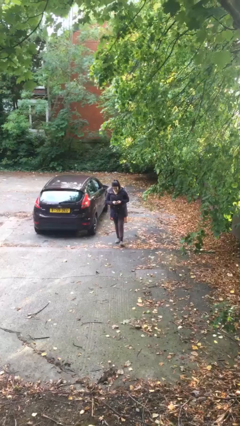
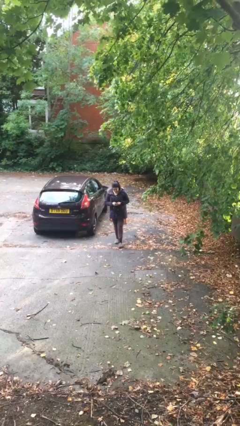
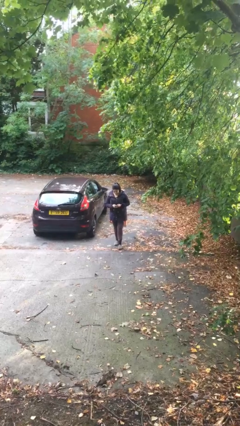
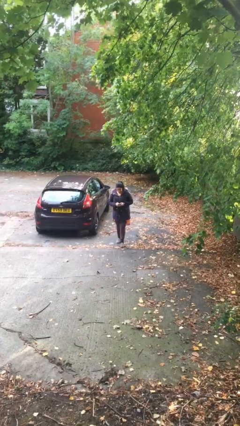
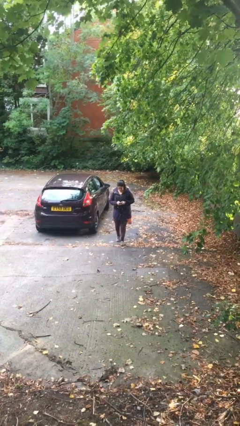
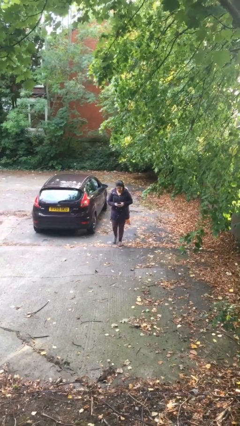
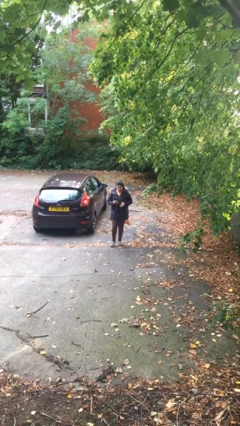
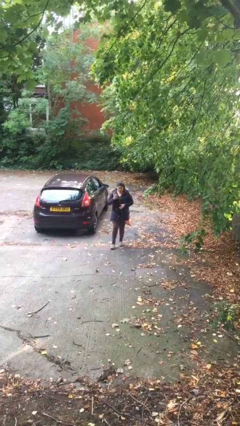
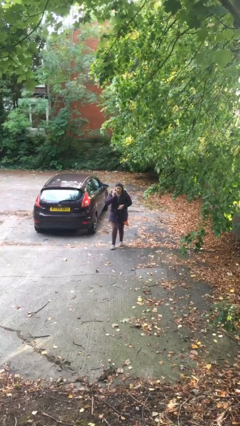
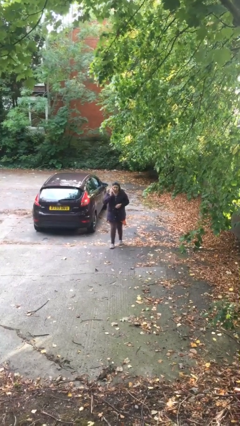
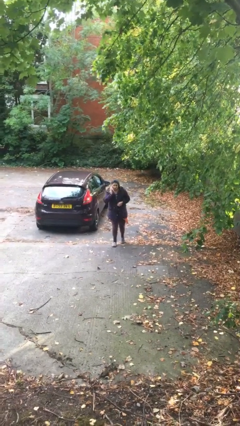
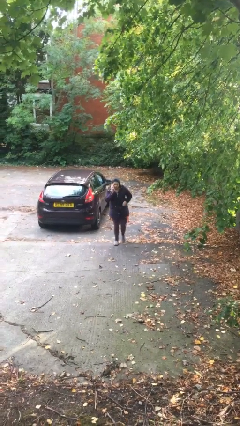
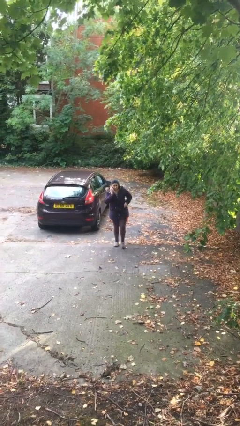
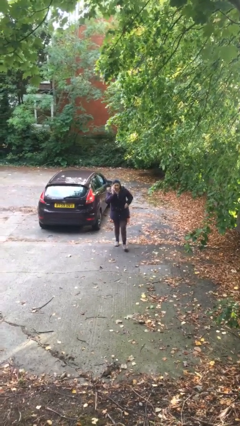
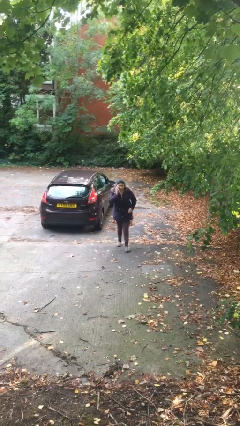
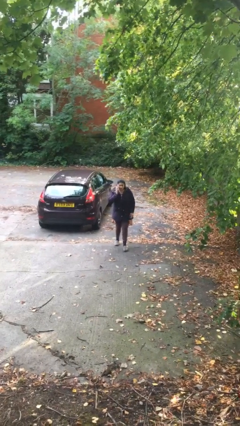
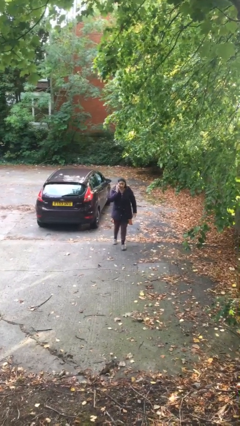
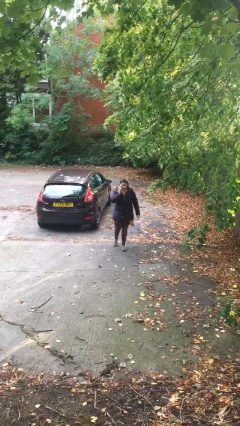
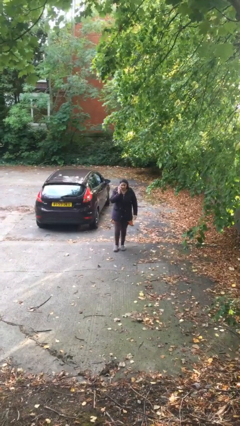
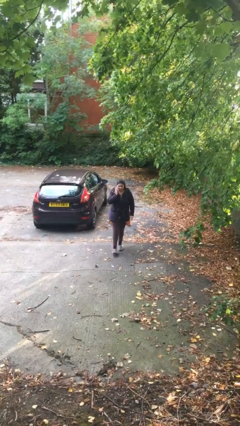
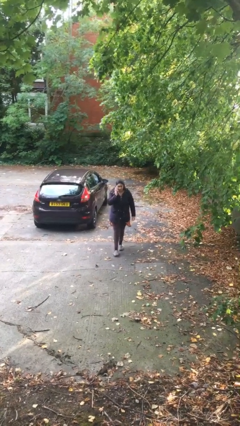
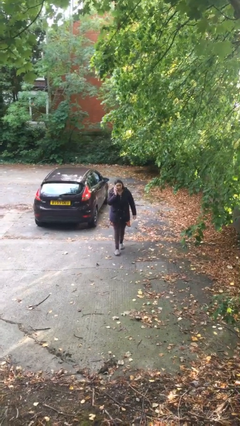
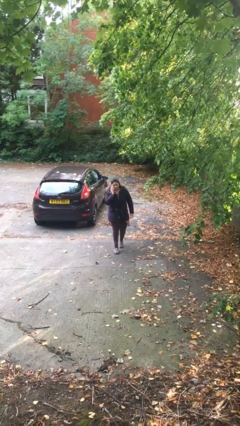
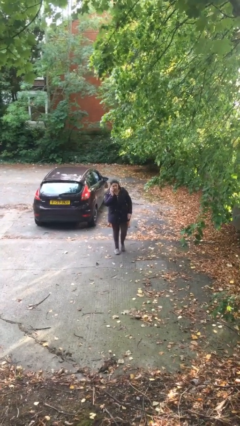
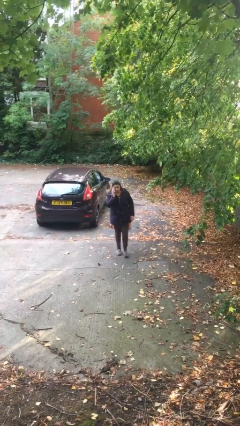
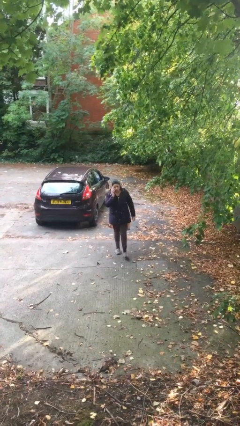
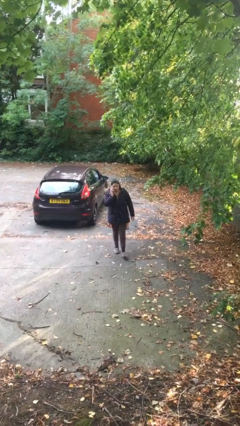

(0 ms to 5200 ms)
person talks on phone

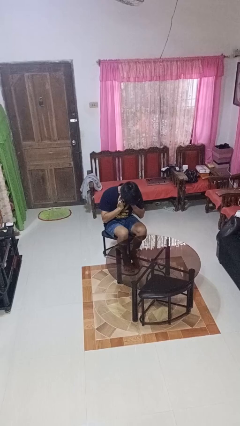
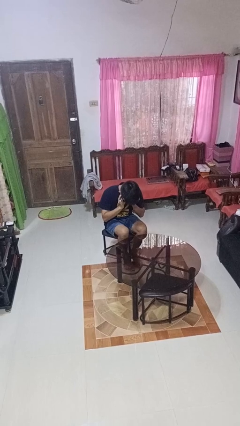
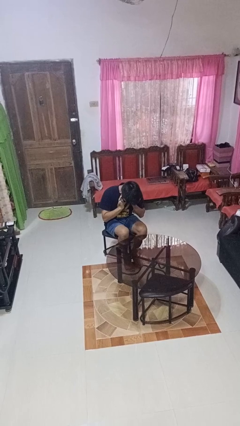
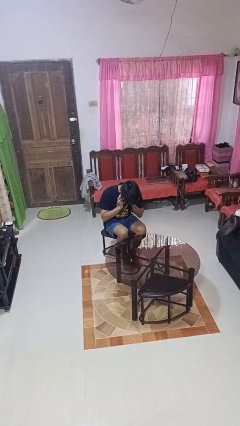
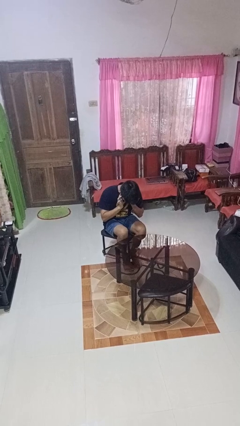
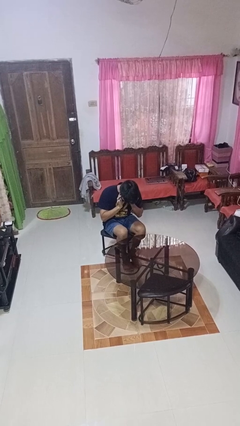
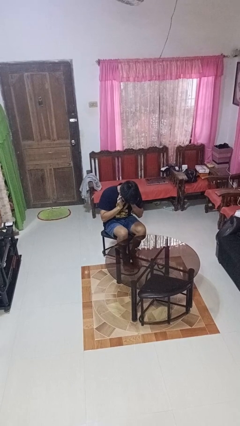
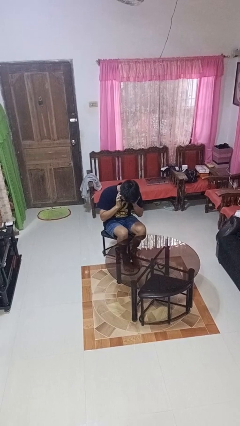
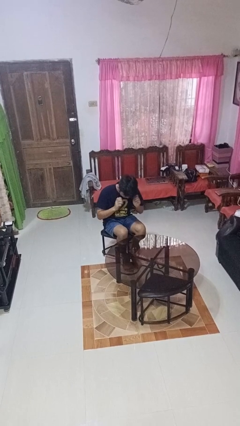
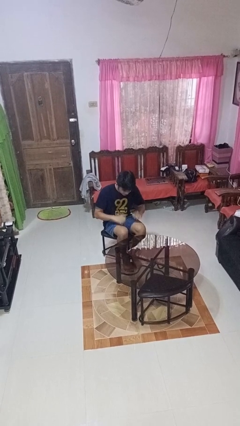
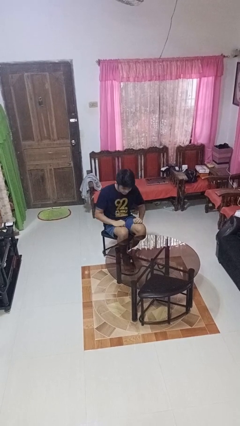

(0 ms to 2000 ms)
person puts fingers in ear

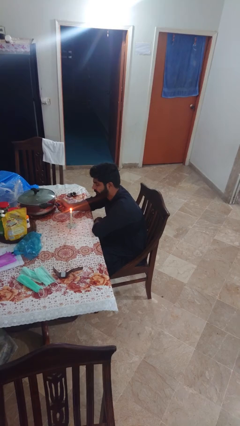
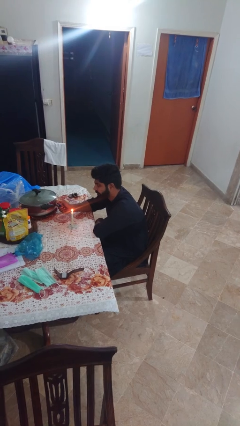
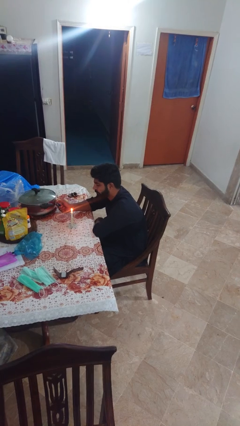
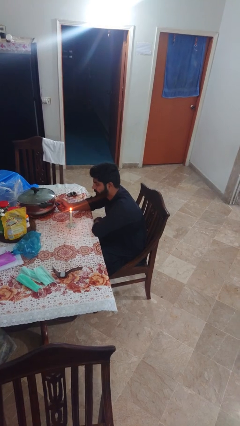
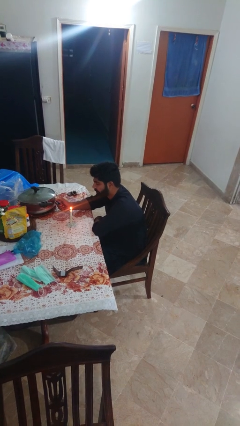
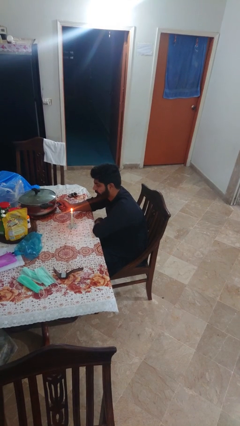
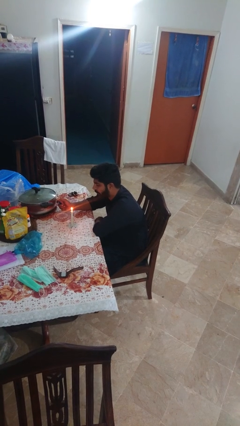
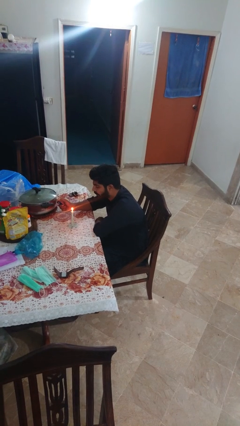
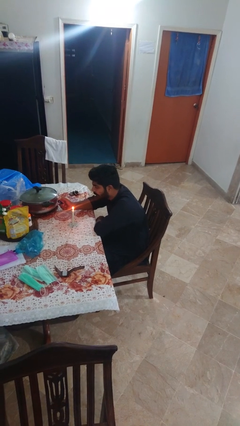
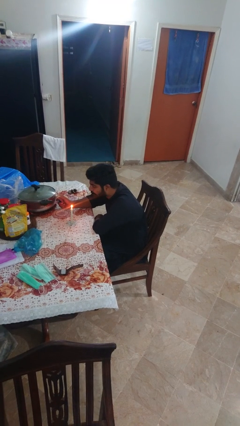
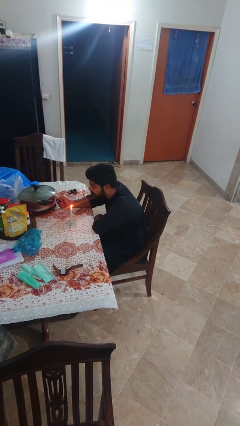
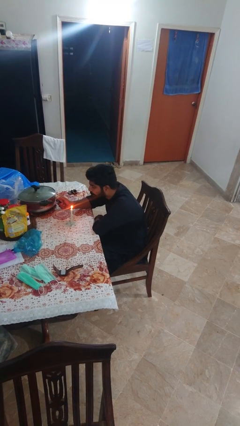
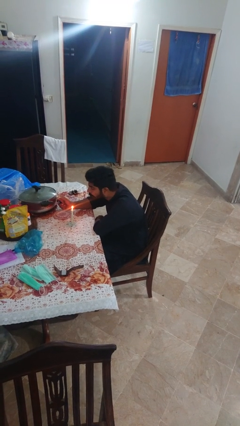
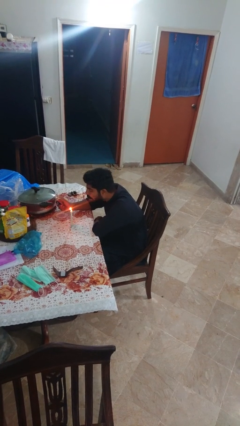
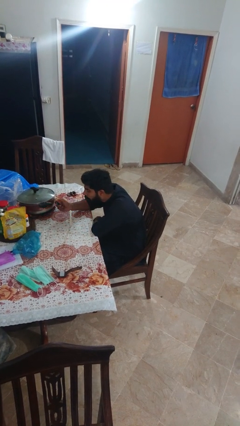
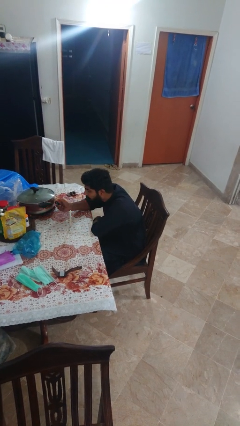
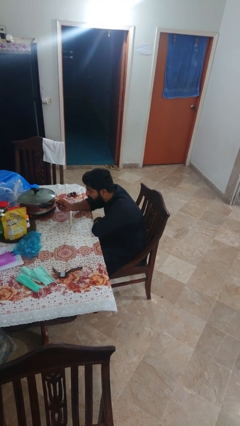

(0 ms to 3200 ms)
person extinguishes candle

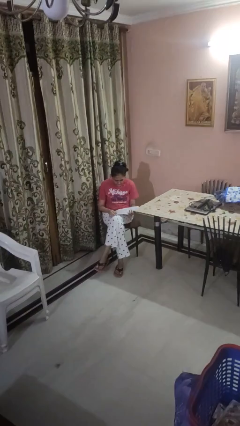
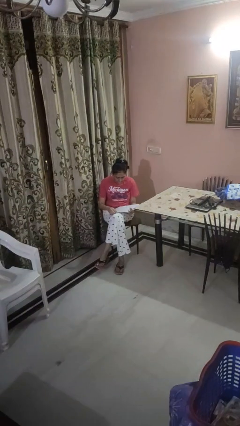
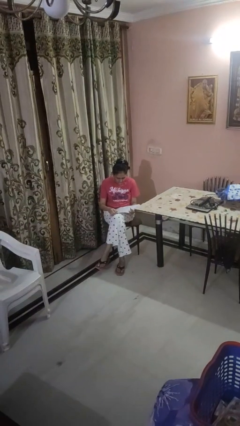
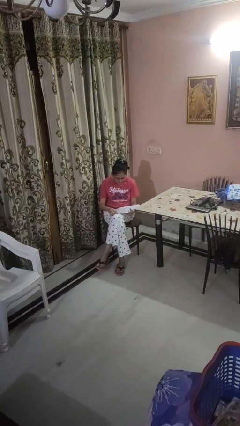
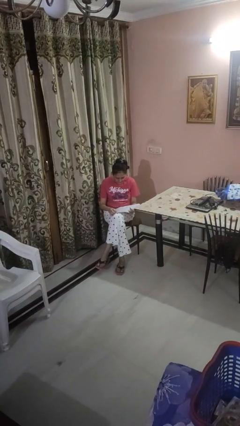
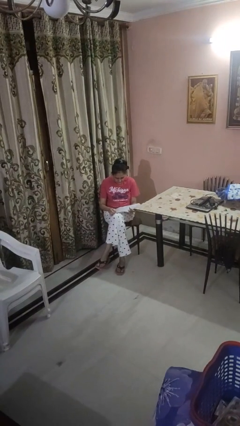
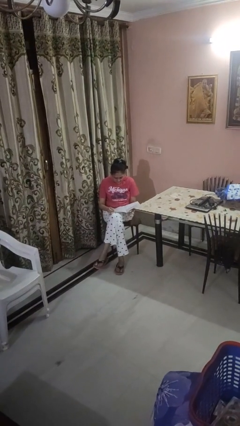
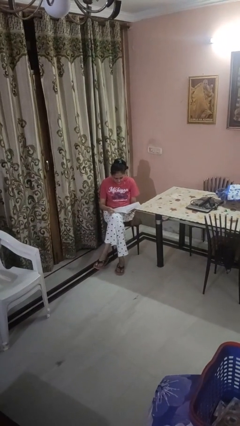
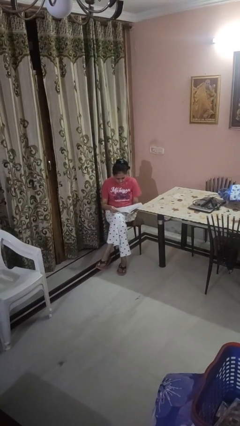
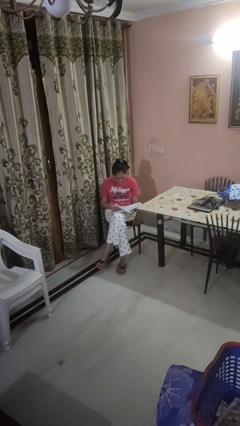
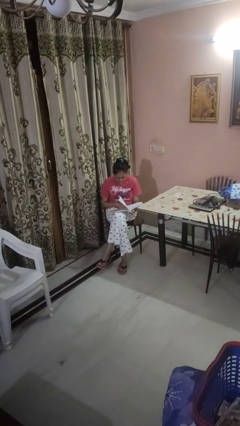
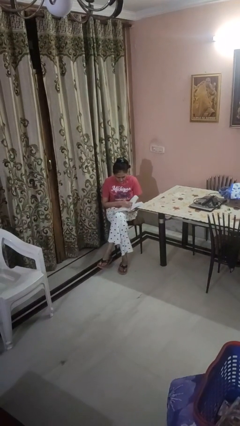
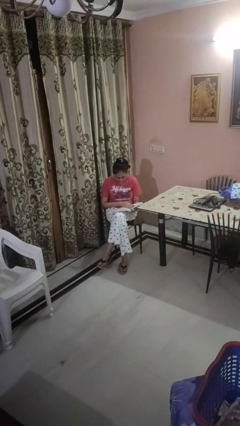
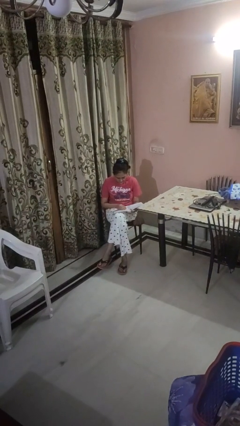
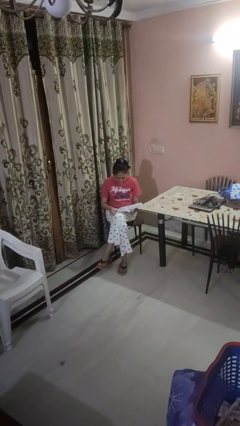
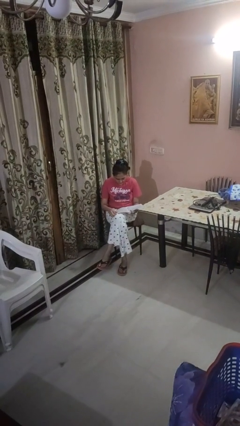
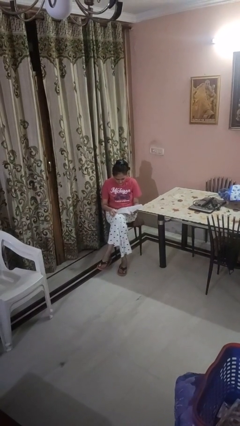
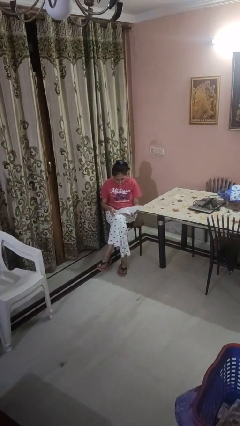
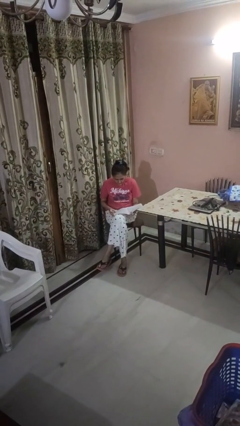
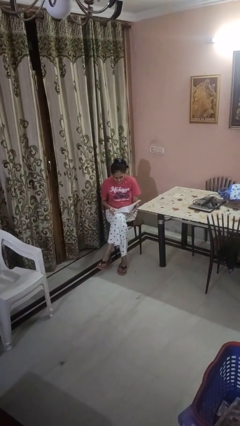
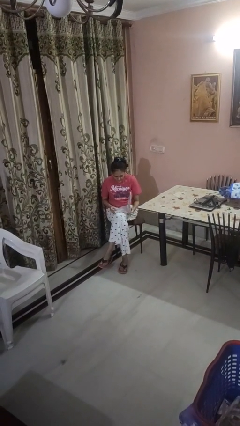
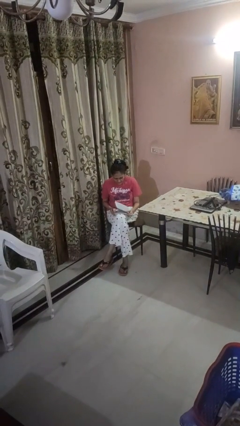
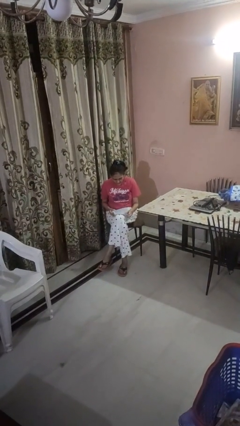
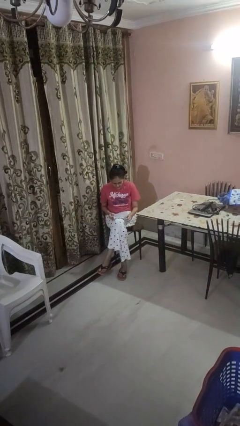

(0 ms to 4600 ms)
person reads magazine

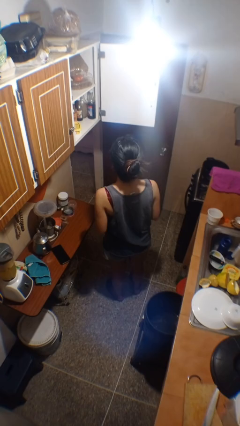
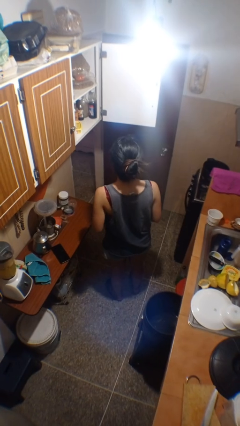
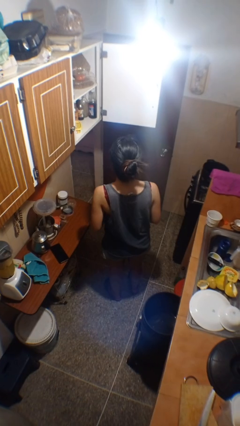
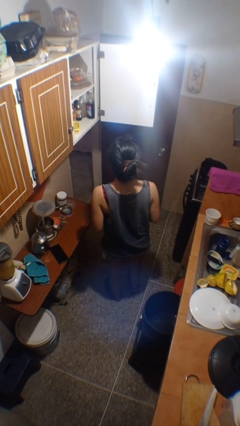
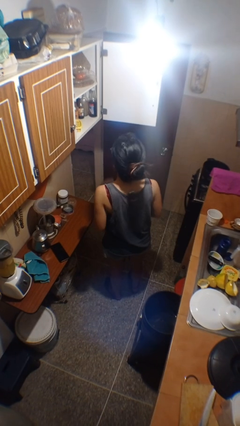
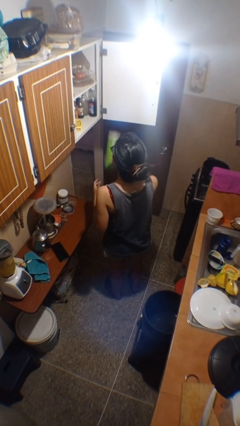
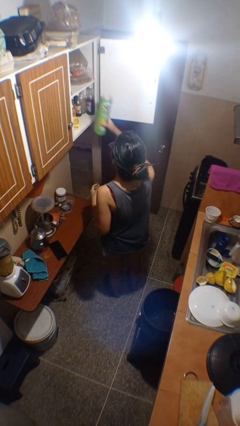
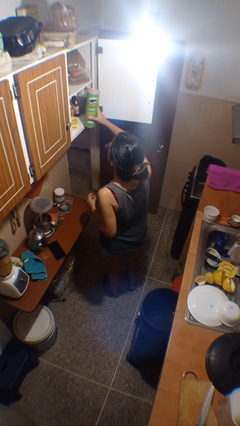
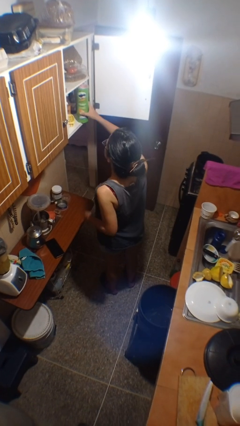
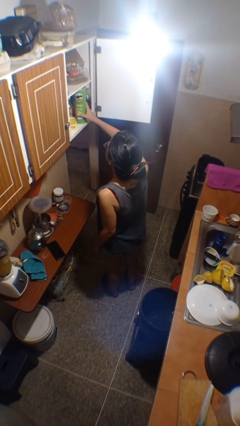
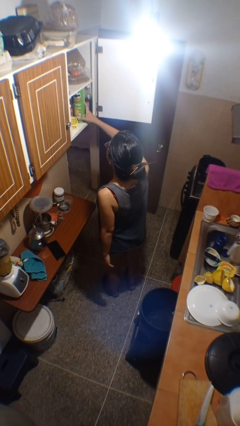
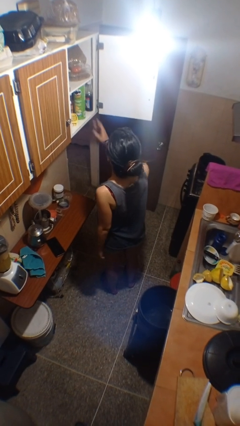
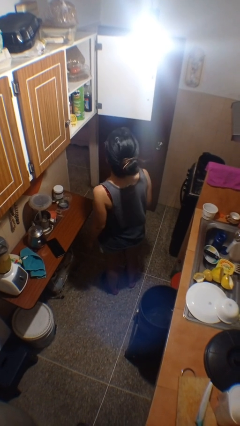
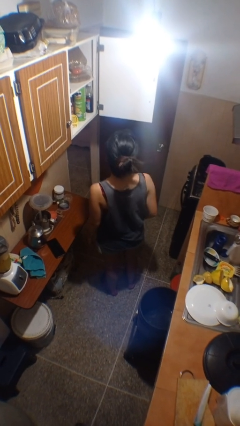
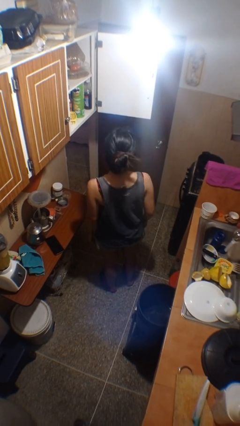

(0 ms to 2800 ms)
person puts object in cabinet
